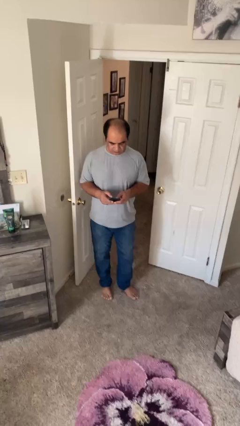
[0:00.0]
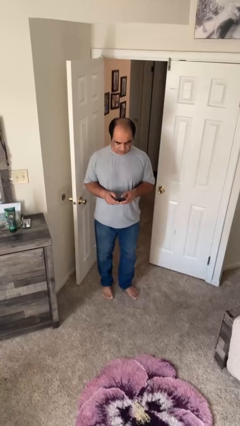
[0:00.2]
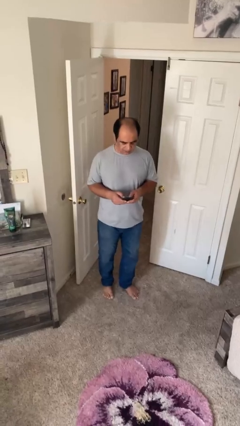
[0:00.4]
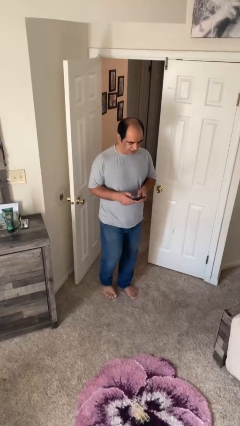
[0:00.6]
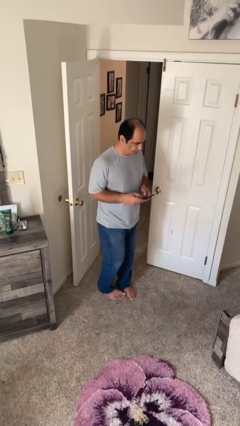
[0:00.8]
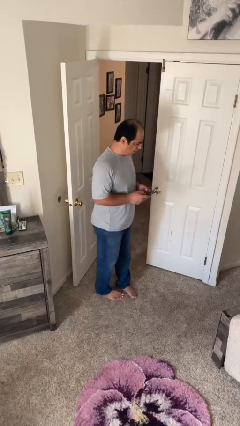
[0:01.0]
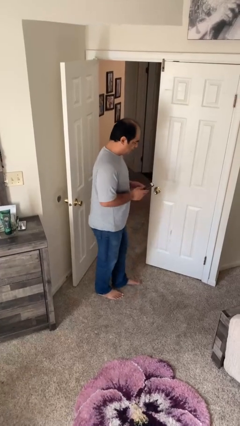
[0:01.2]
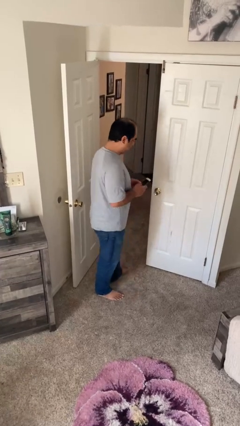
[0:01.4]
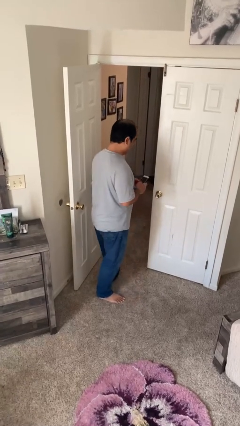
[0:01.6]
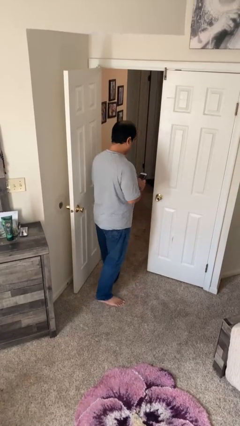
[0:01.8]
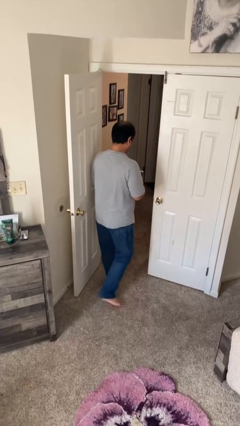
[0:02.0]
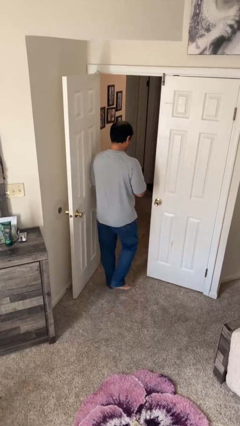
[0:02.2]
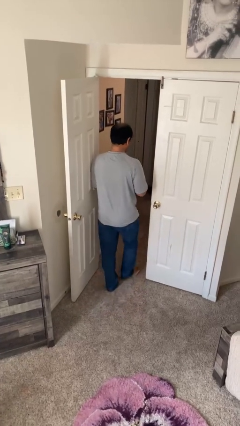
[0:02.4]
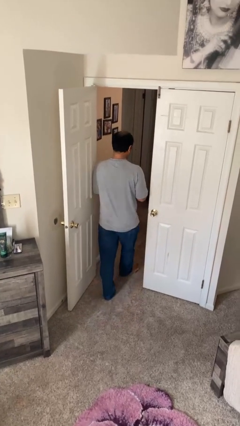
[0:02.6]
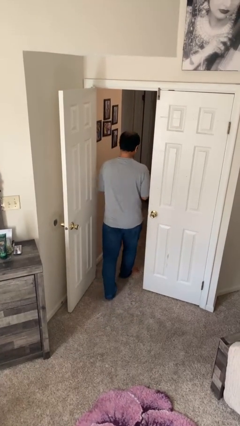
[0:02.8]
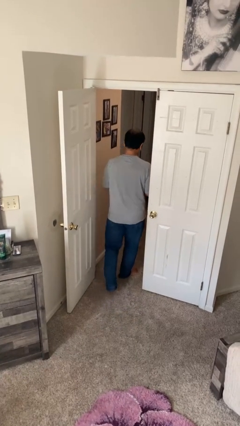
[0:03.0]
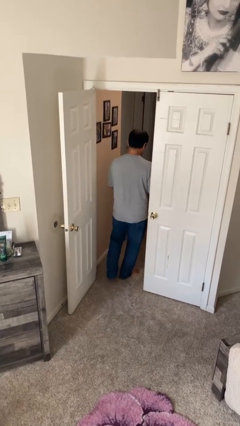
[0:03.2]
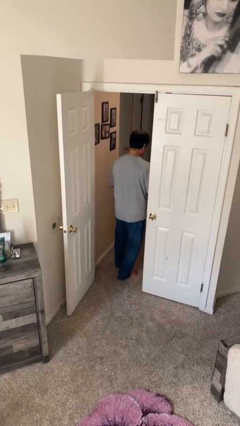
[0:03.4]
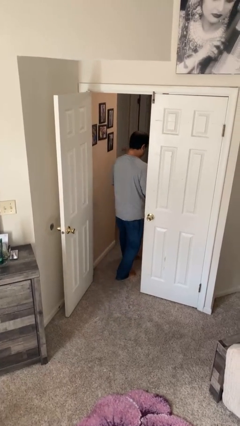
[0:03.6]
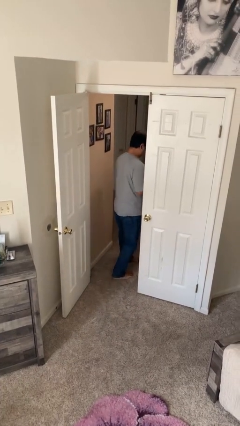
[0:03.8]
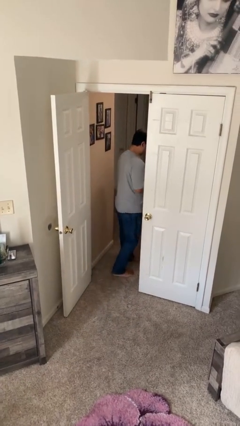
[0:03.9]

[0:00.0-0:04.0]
person exits scene through structure

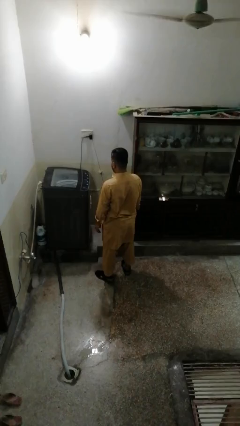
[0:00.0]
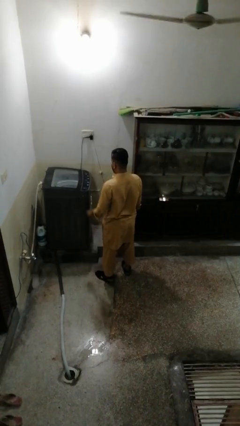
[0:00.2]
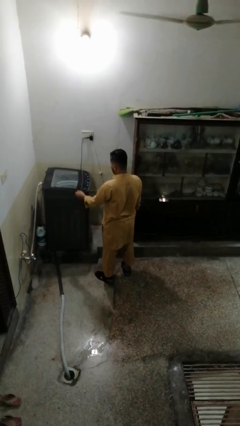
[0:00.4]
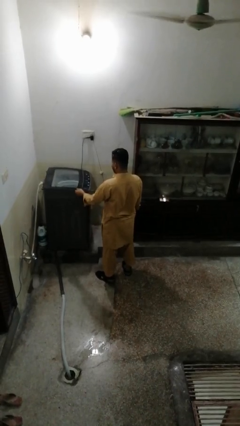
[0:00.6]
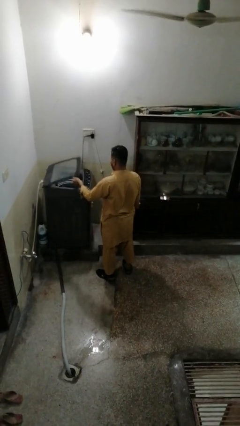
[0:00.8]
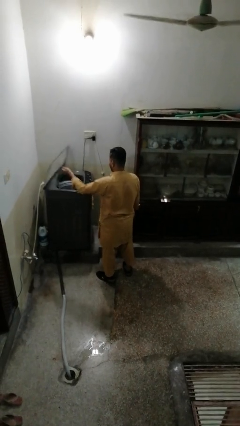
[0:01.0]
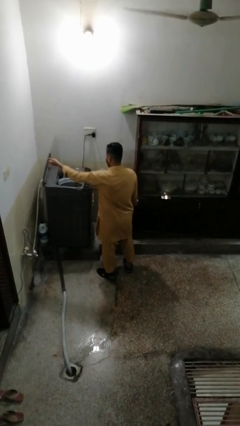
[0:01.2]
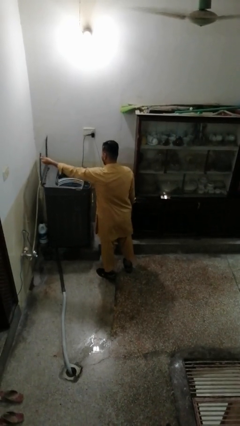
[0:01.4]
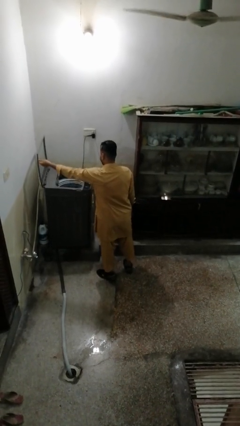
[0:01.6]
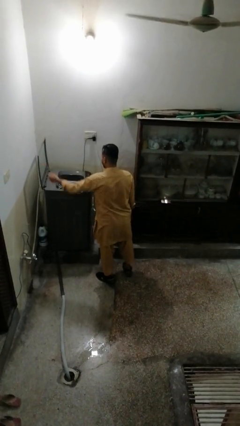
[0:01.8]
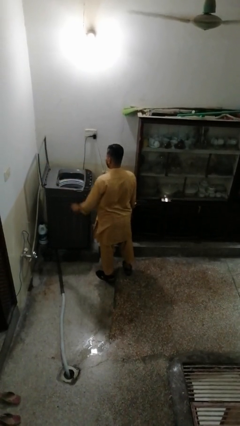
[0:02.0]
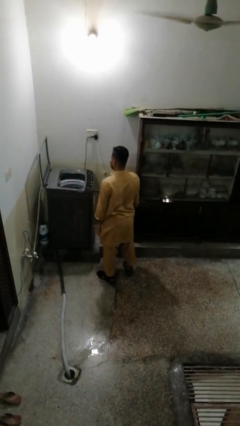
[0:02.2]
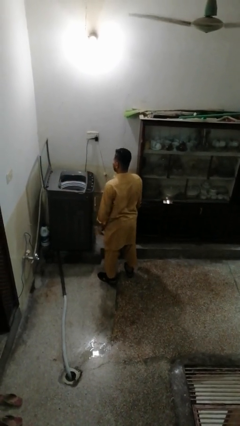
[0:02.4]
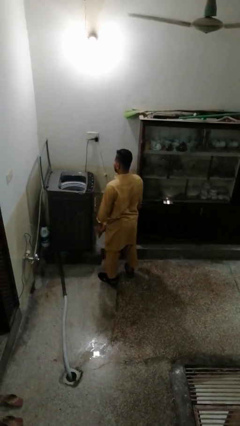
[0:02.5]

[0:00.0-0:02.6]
person opens clothes washer

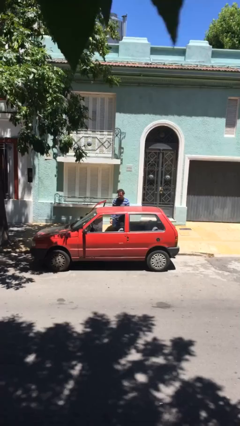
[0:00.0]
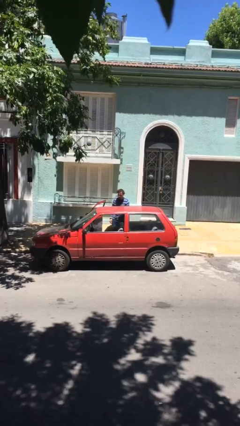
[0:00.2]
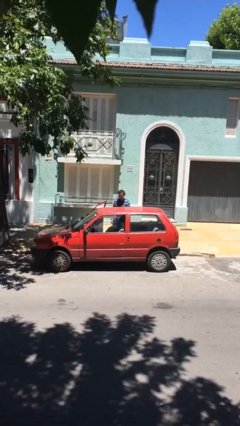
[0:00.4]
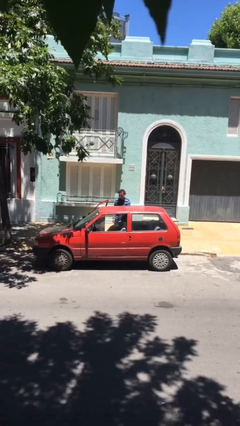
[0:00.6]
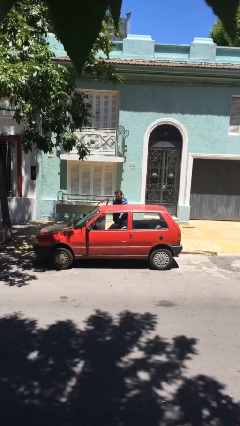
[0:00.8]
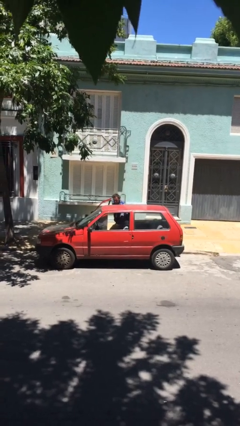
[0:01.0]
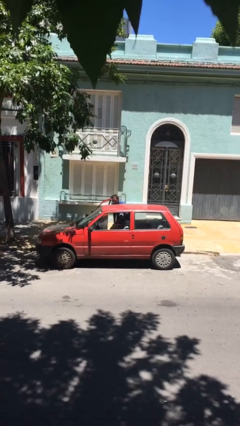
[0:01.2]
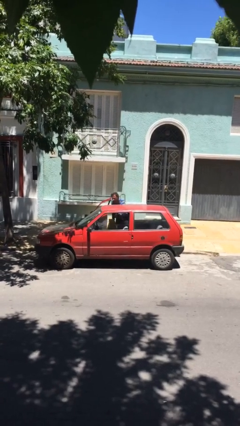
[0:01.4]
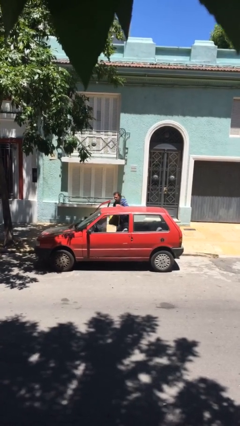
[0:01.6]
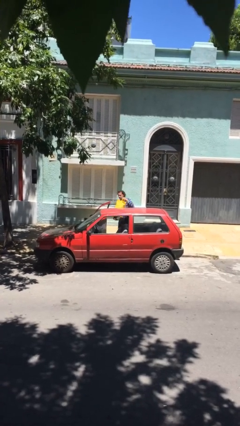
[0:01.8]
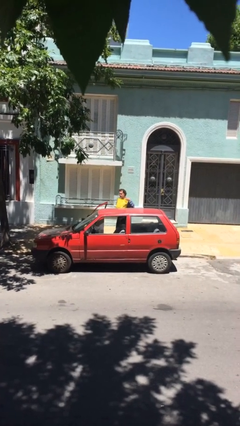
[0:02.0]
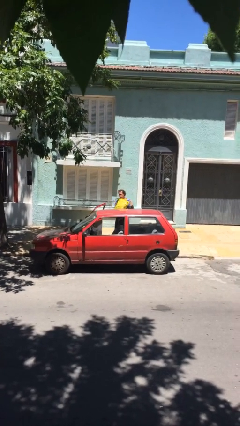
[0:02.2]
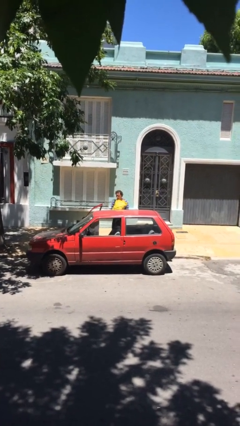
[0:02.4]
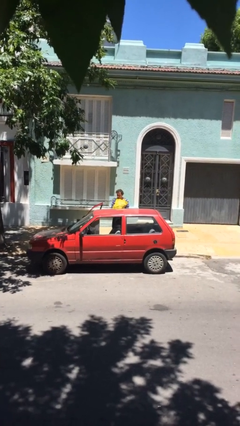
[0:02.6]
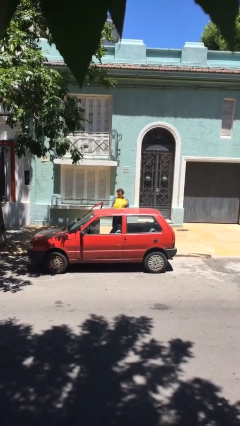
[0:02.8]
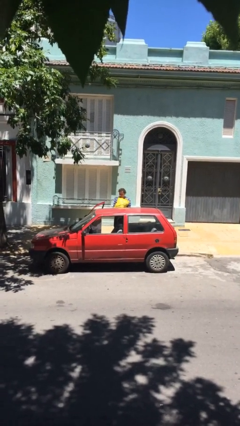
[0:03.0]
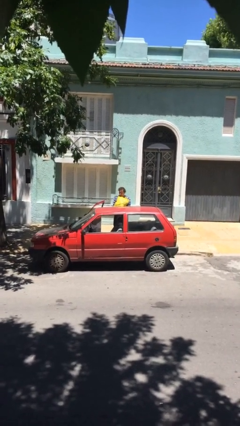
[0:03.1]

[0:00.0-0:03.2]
person unloads car

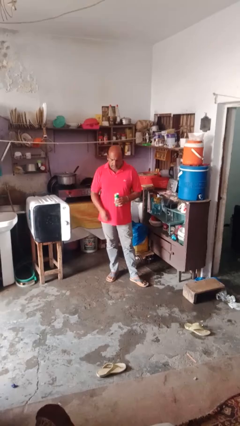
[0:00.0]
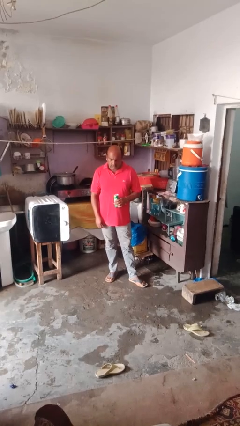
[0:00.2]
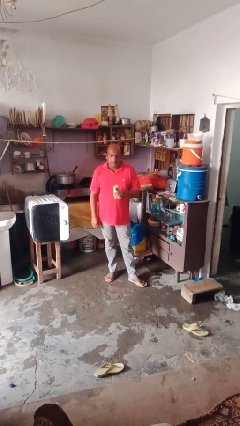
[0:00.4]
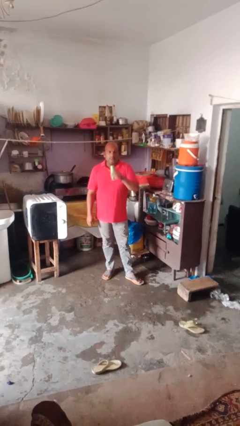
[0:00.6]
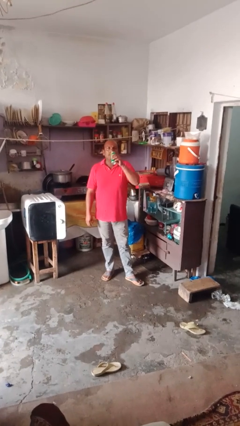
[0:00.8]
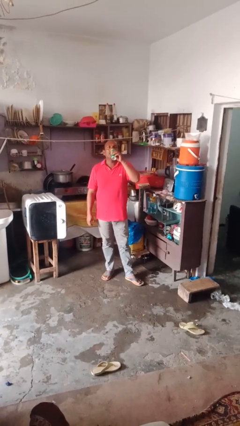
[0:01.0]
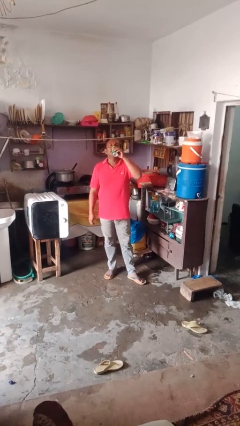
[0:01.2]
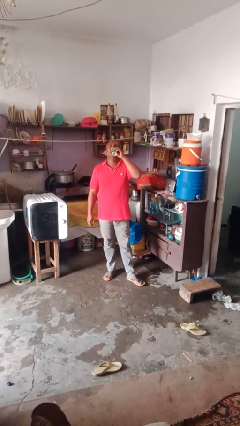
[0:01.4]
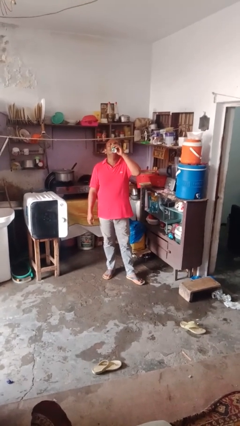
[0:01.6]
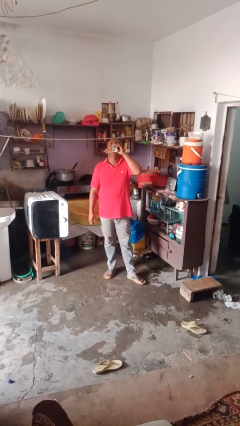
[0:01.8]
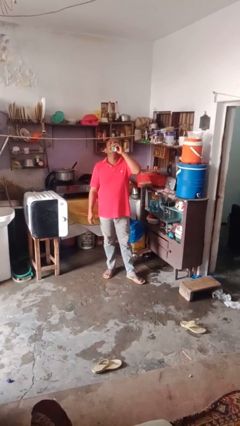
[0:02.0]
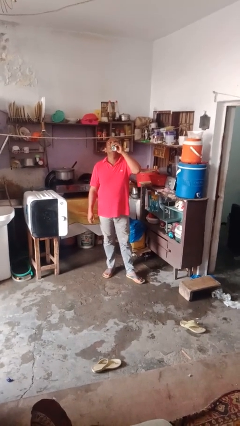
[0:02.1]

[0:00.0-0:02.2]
person drinks from beverage can

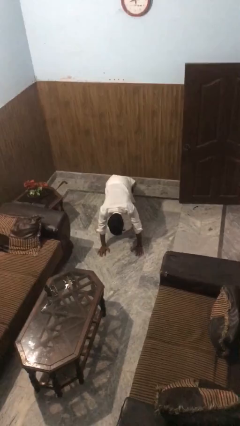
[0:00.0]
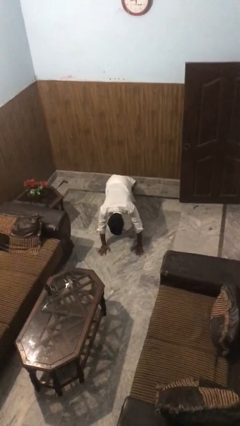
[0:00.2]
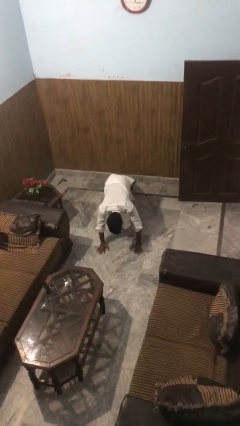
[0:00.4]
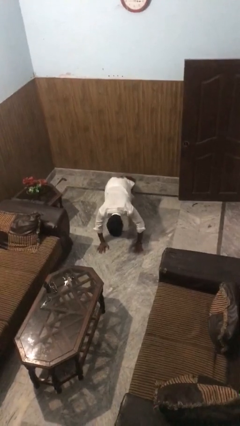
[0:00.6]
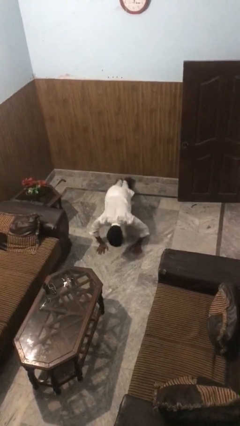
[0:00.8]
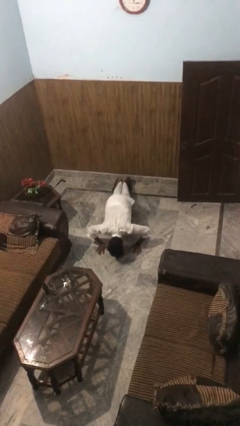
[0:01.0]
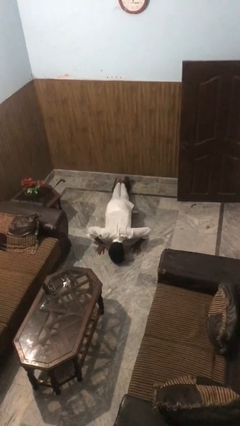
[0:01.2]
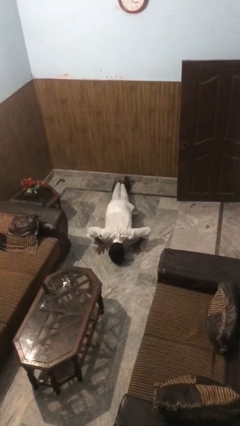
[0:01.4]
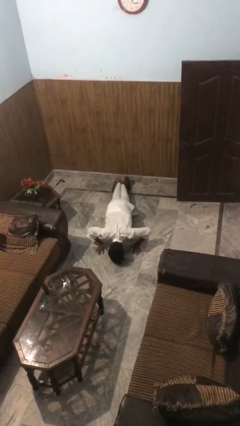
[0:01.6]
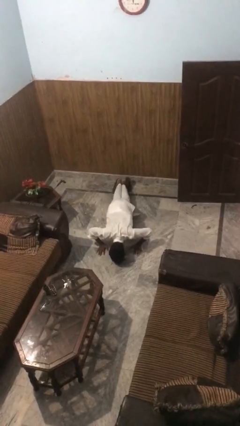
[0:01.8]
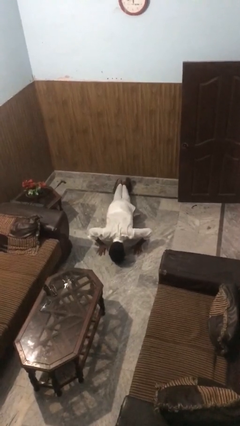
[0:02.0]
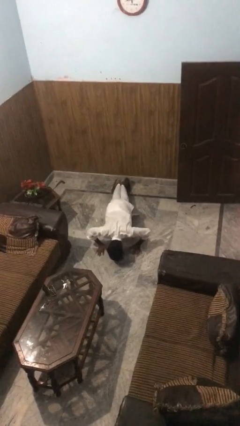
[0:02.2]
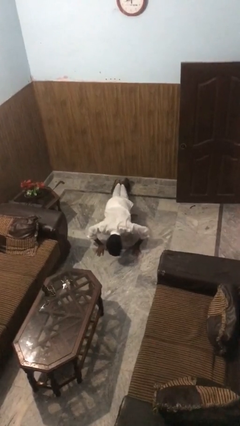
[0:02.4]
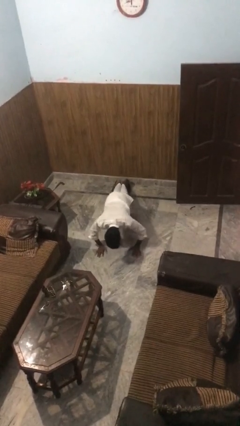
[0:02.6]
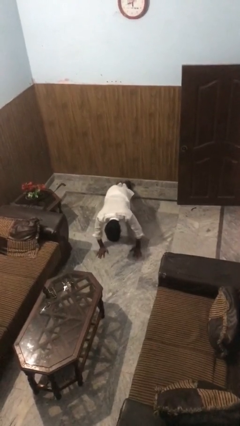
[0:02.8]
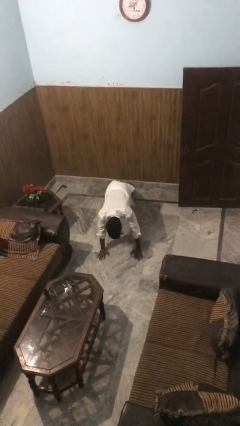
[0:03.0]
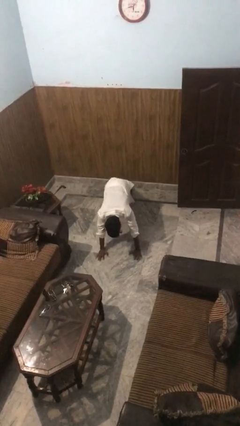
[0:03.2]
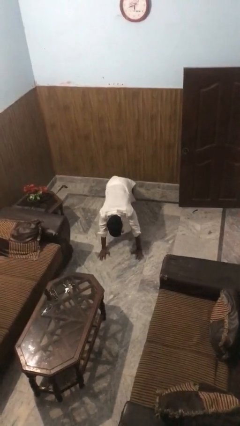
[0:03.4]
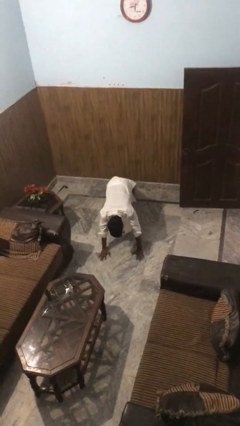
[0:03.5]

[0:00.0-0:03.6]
person exercises with pushup

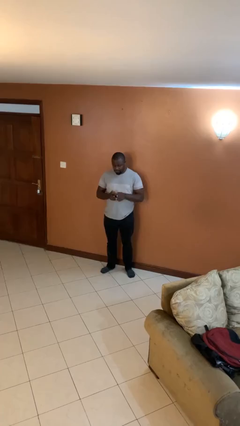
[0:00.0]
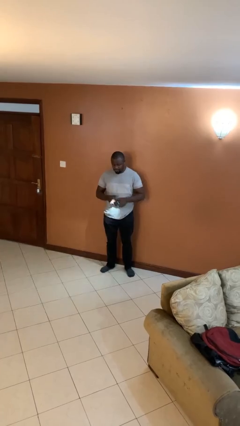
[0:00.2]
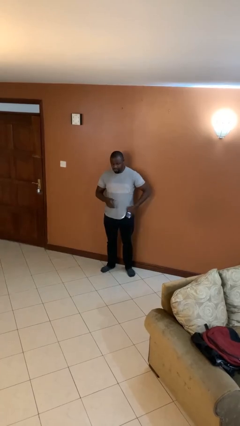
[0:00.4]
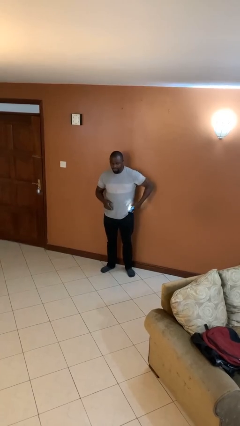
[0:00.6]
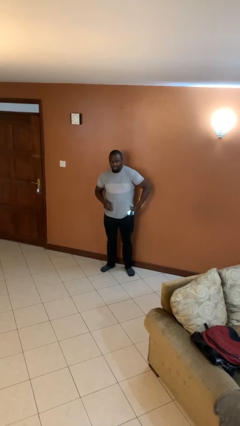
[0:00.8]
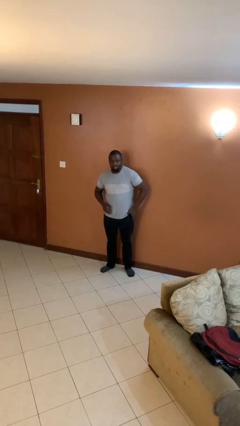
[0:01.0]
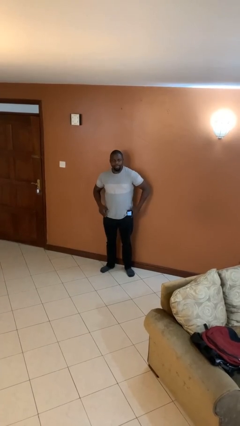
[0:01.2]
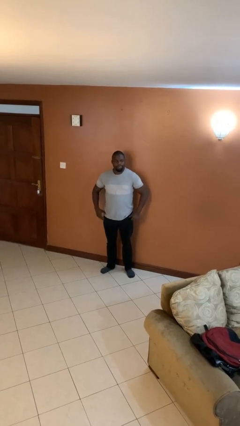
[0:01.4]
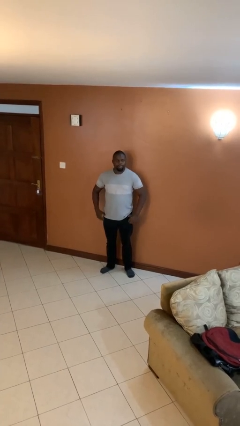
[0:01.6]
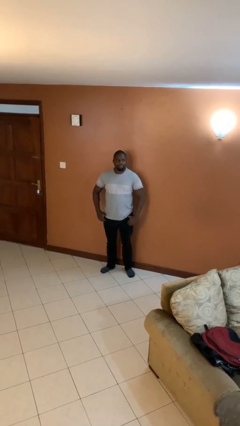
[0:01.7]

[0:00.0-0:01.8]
person puts phone into pocket
